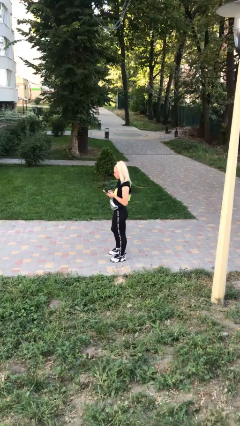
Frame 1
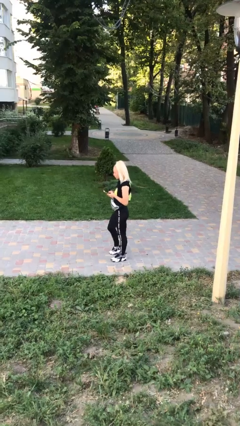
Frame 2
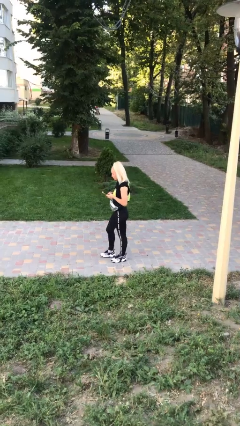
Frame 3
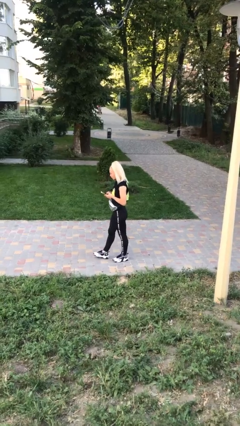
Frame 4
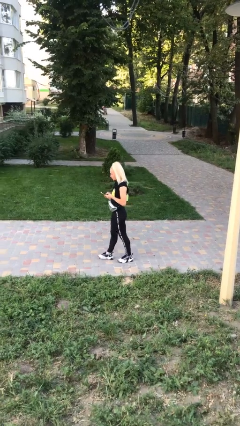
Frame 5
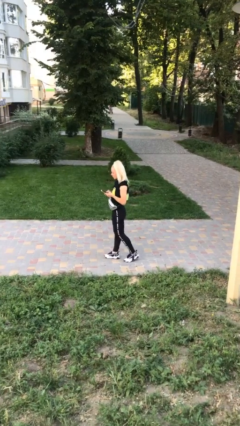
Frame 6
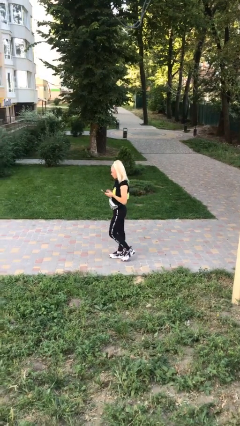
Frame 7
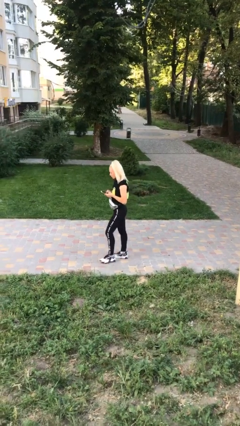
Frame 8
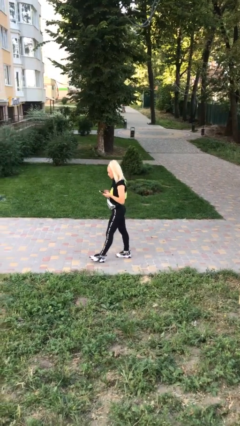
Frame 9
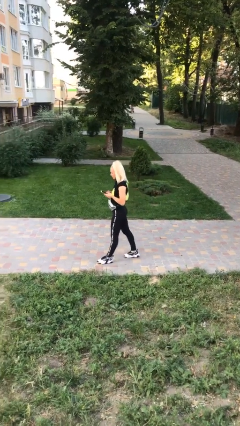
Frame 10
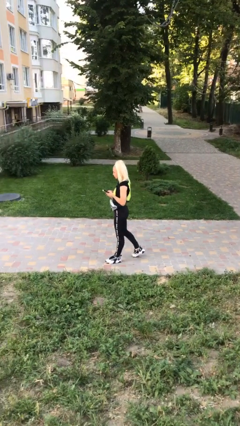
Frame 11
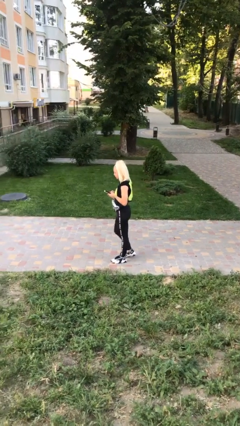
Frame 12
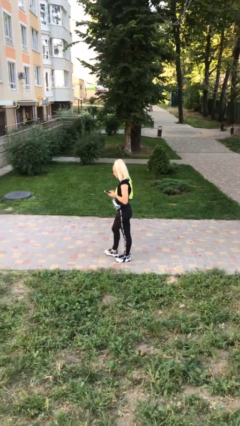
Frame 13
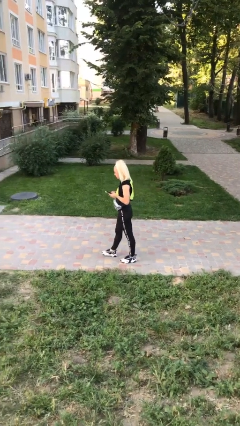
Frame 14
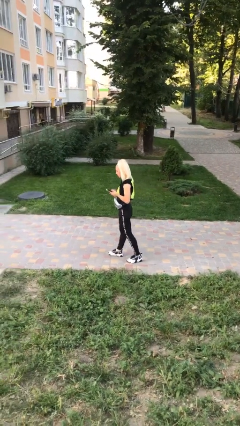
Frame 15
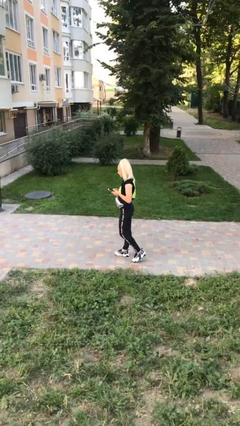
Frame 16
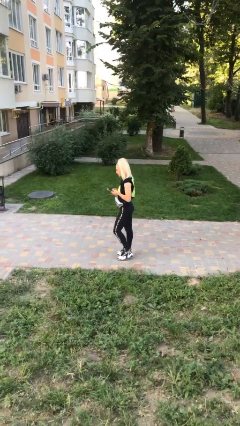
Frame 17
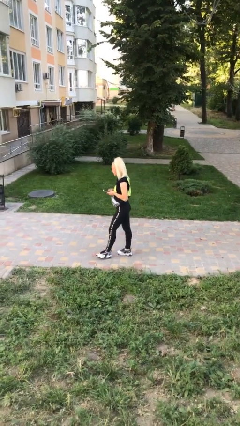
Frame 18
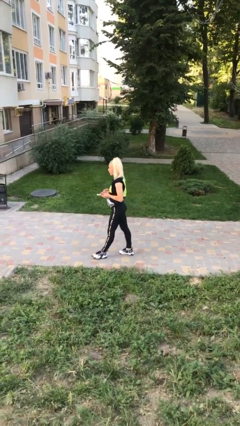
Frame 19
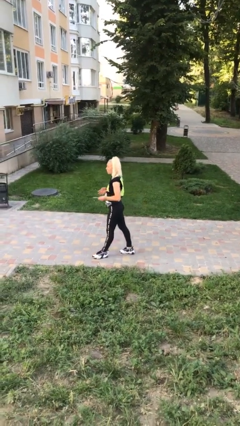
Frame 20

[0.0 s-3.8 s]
person texts on phone

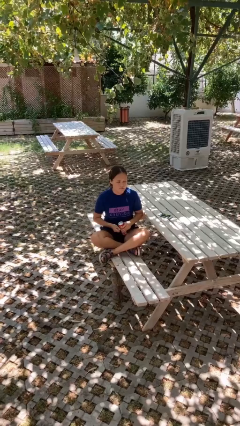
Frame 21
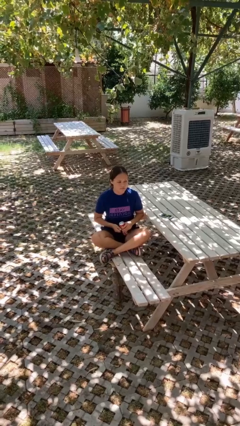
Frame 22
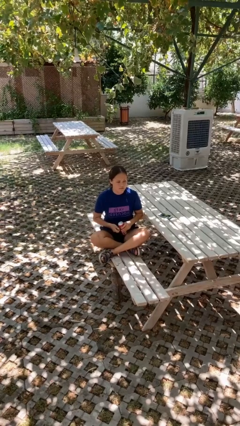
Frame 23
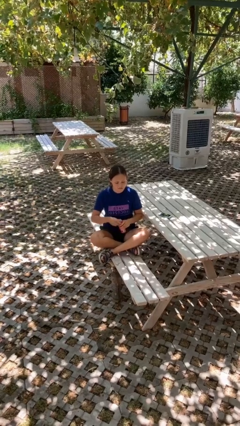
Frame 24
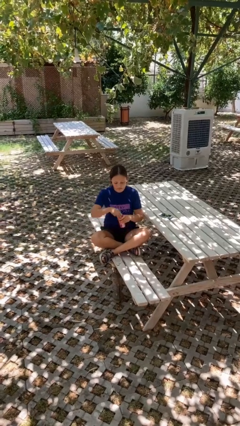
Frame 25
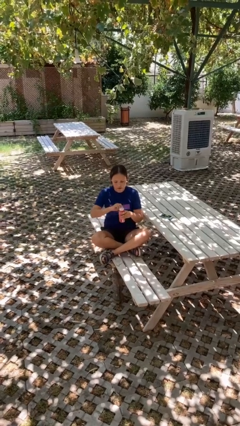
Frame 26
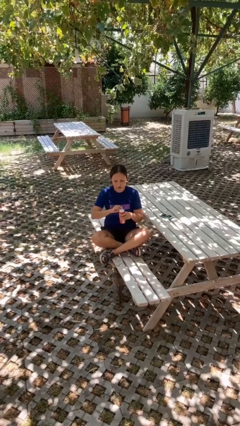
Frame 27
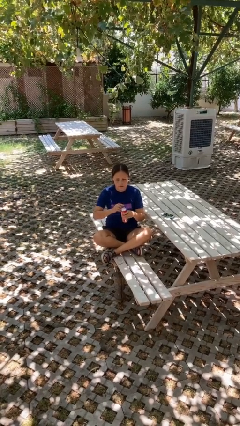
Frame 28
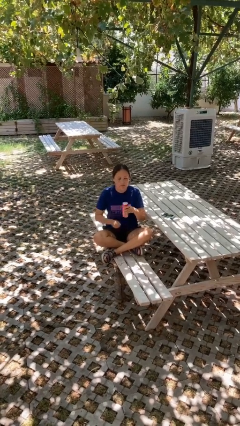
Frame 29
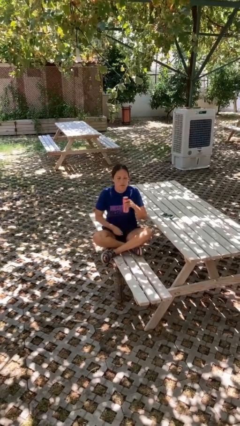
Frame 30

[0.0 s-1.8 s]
person opens beverage can

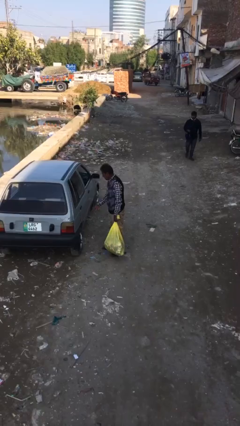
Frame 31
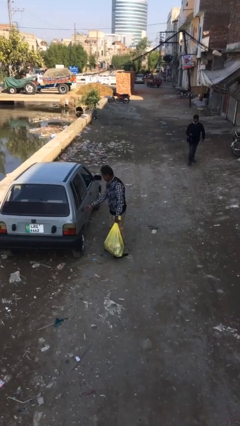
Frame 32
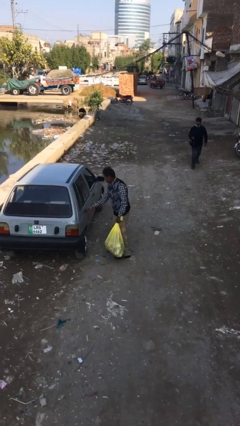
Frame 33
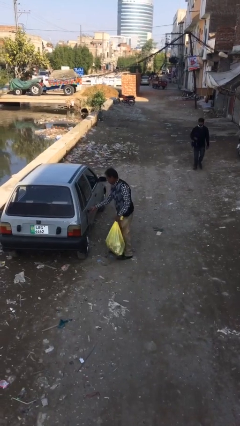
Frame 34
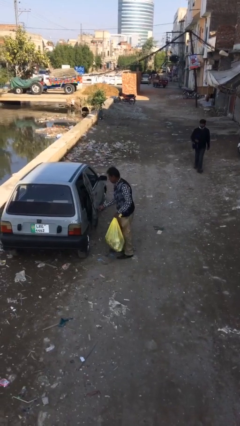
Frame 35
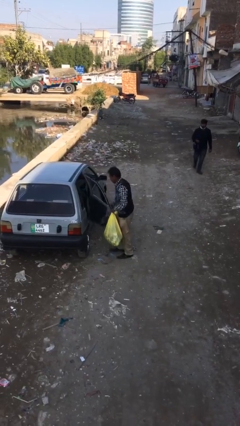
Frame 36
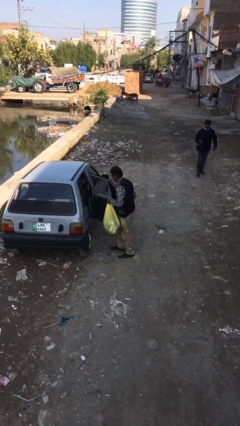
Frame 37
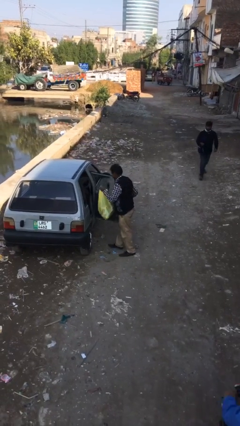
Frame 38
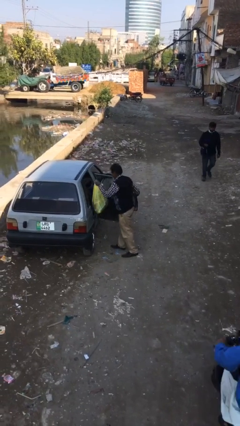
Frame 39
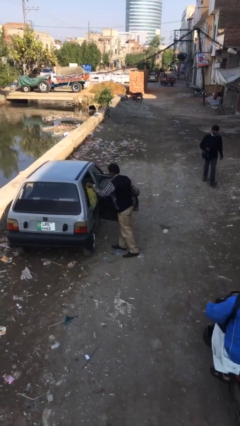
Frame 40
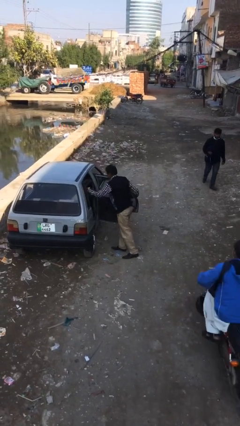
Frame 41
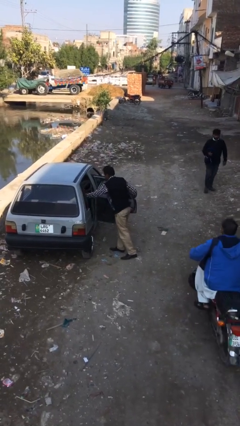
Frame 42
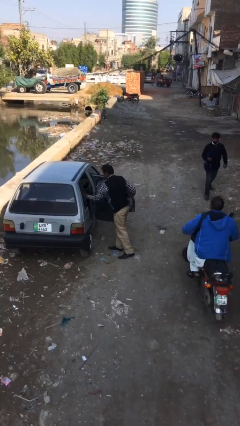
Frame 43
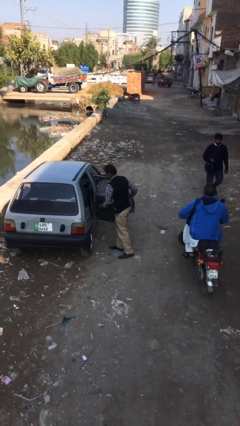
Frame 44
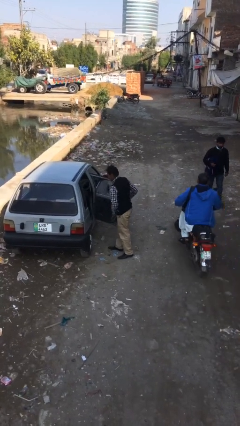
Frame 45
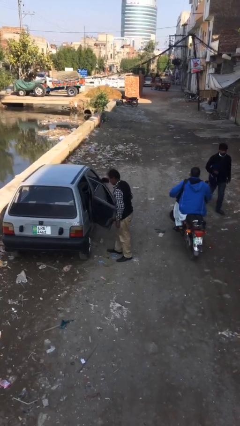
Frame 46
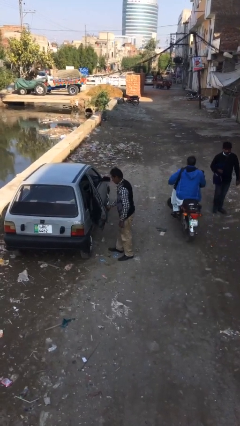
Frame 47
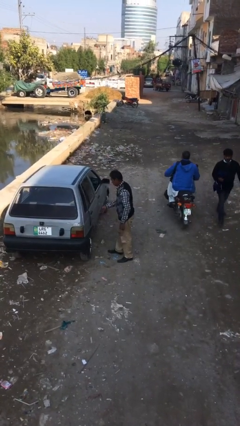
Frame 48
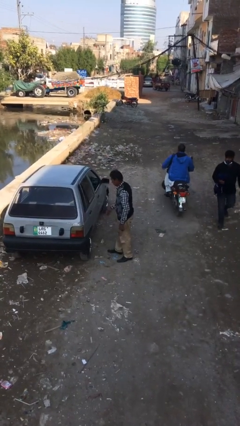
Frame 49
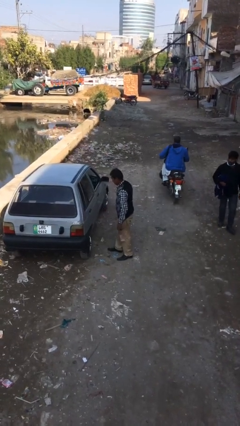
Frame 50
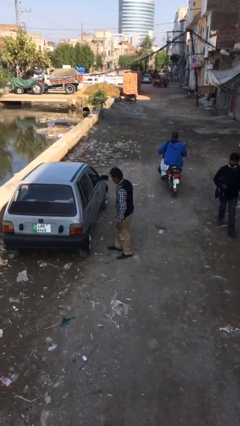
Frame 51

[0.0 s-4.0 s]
person loads car

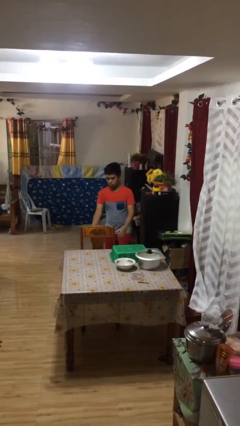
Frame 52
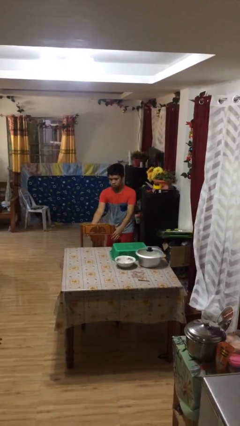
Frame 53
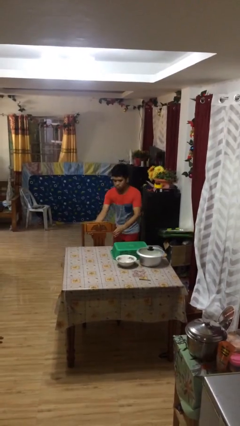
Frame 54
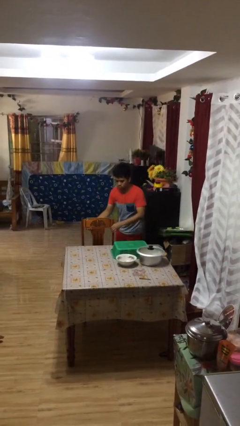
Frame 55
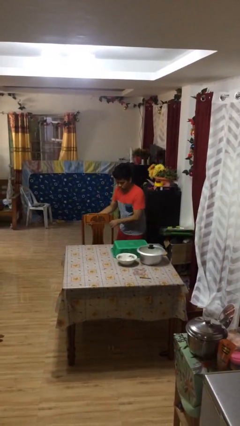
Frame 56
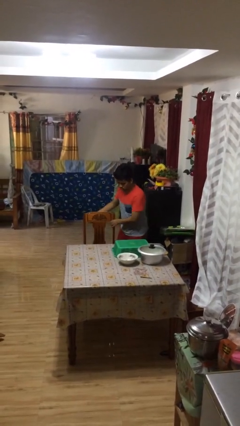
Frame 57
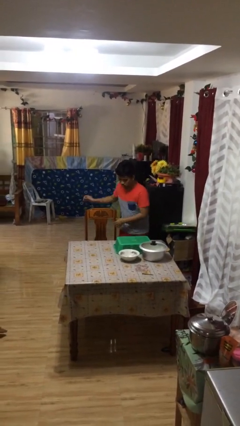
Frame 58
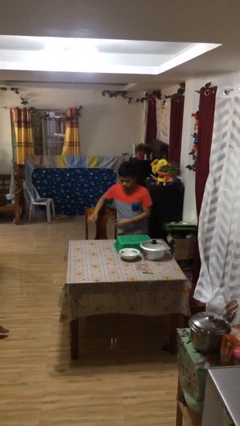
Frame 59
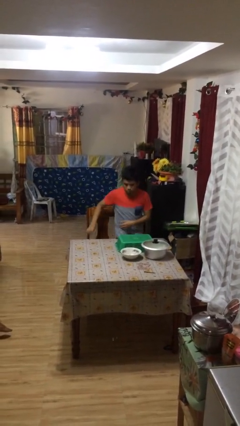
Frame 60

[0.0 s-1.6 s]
person stands up

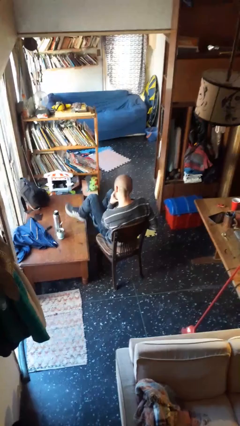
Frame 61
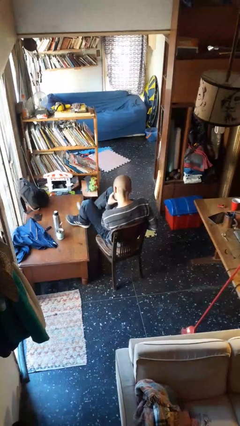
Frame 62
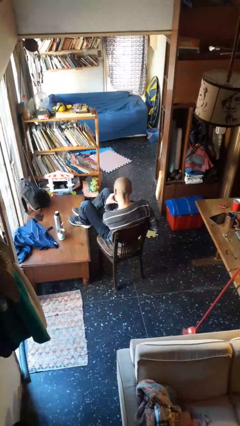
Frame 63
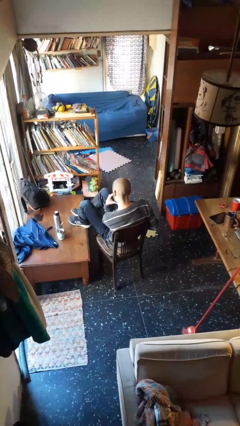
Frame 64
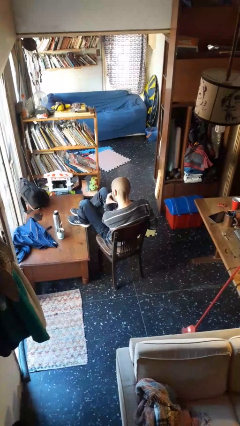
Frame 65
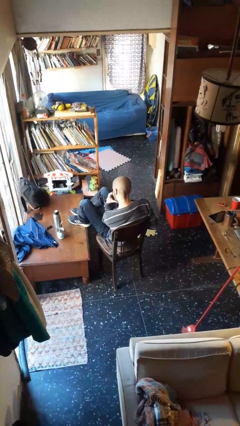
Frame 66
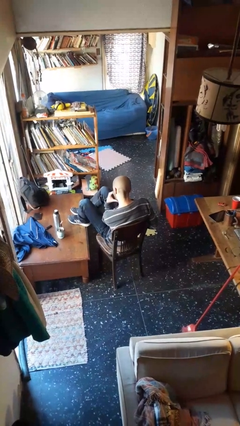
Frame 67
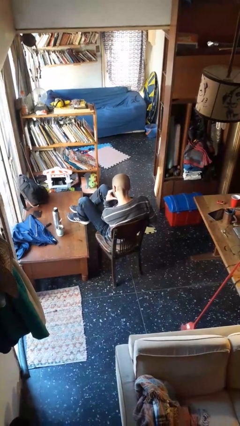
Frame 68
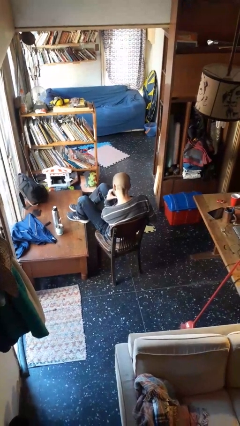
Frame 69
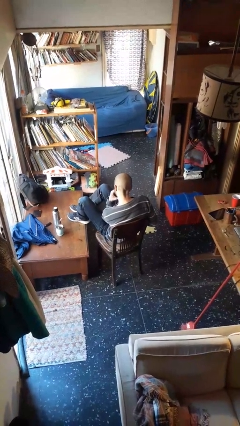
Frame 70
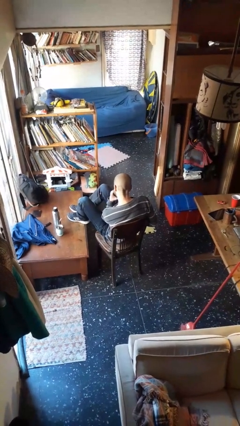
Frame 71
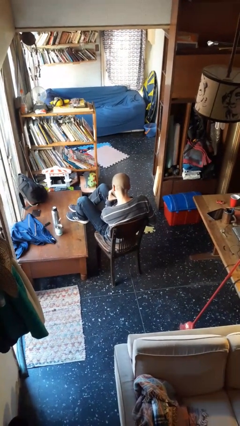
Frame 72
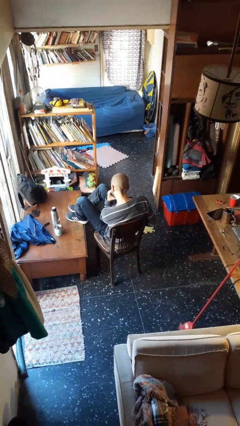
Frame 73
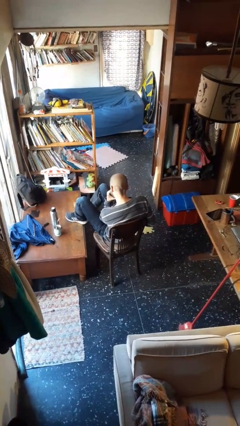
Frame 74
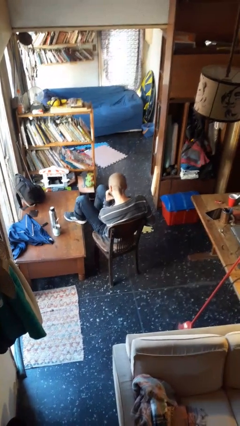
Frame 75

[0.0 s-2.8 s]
person puts feet up

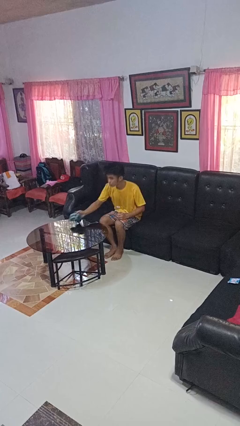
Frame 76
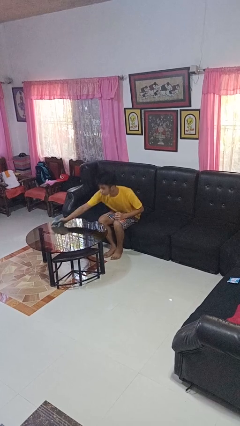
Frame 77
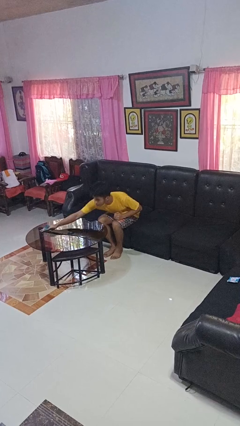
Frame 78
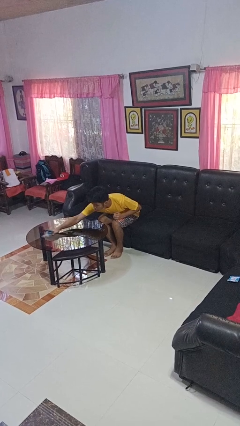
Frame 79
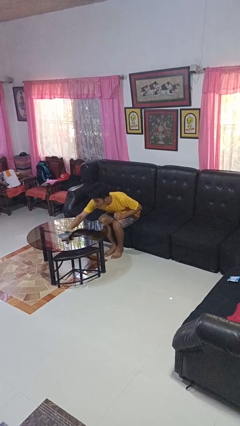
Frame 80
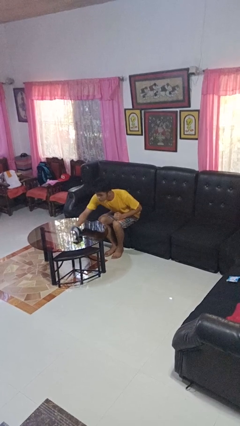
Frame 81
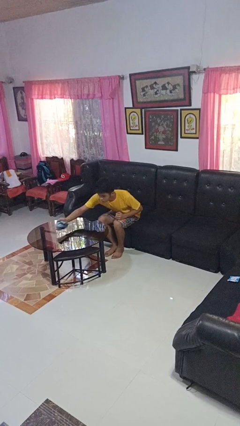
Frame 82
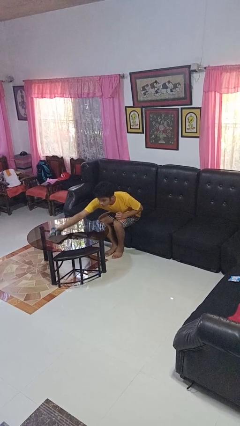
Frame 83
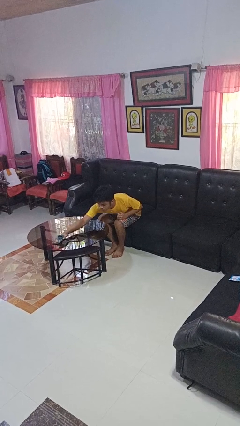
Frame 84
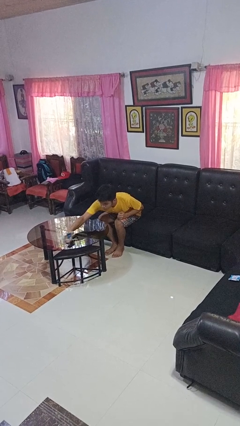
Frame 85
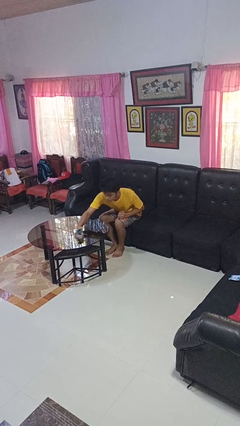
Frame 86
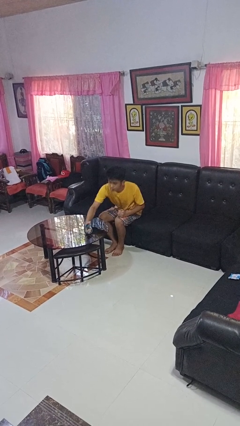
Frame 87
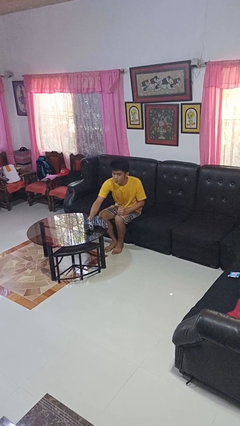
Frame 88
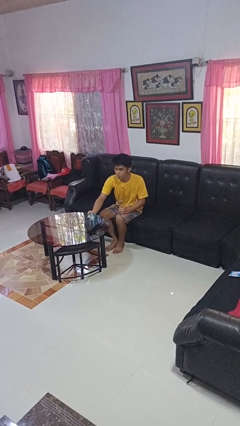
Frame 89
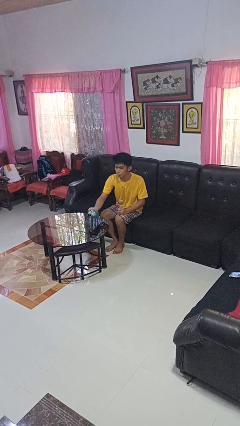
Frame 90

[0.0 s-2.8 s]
person cleans table with rag

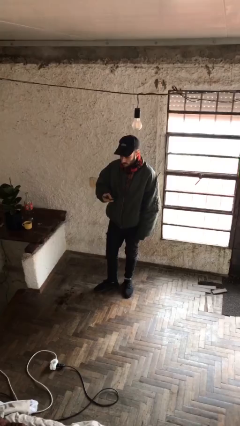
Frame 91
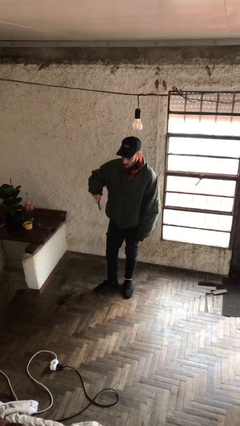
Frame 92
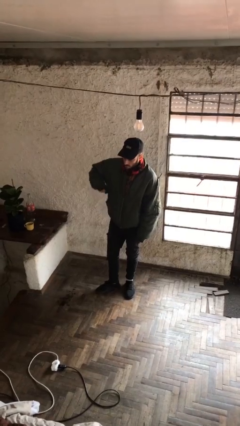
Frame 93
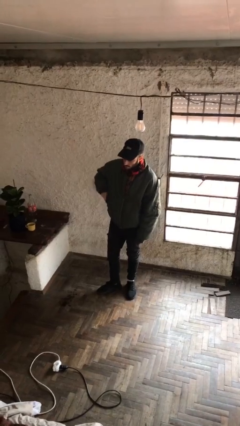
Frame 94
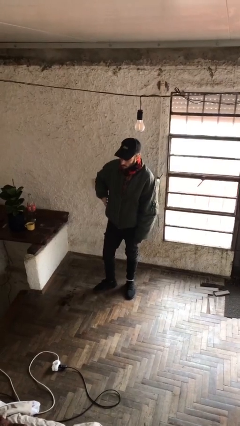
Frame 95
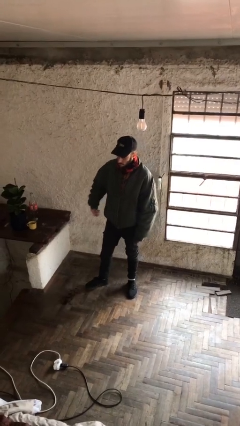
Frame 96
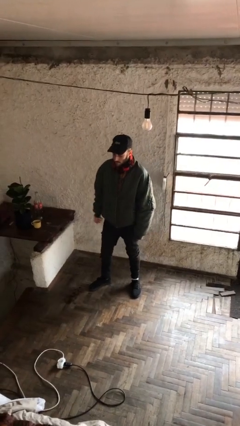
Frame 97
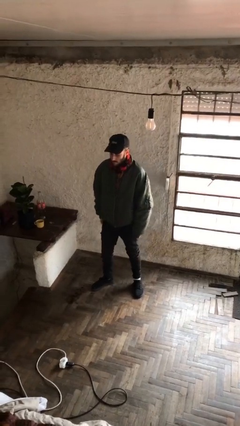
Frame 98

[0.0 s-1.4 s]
person puts phone into pocket
